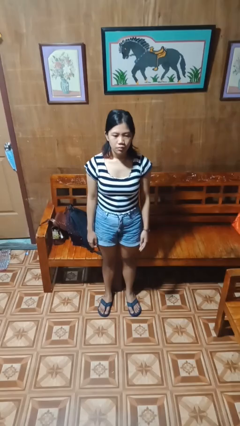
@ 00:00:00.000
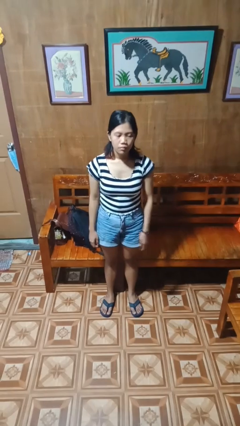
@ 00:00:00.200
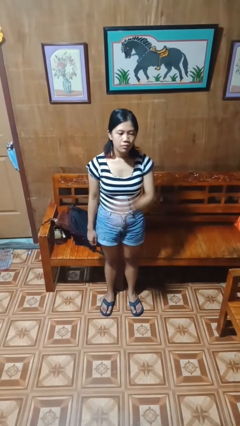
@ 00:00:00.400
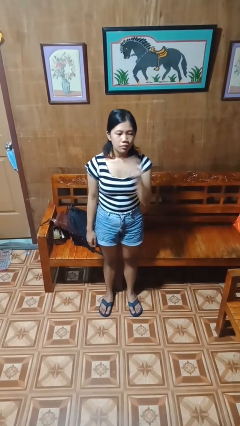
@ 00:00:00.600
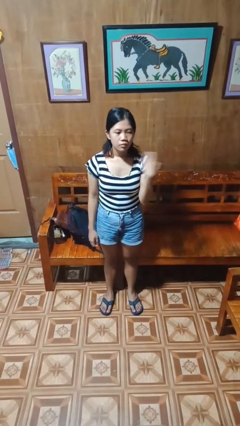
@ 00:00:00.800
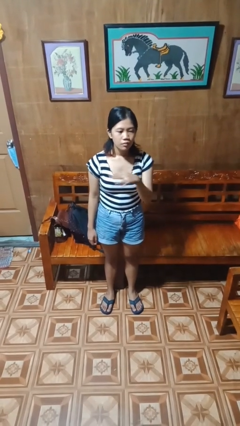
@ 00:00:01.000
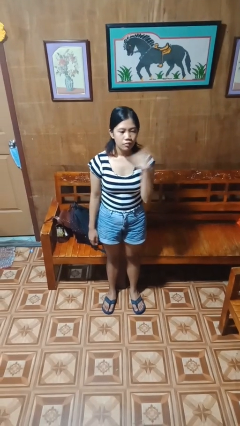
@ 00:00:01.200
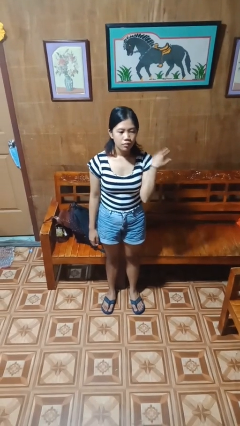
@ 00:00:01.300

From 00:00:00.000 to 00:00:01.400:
person gestures cut

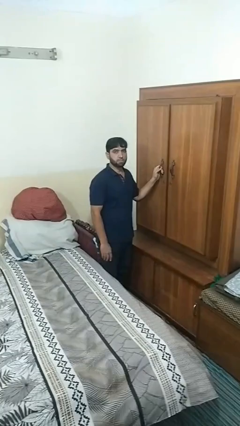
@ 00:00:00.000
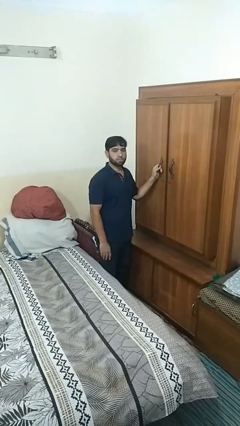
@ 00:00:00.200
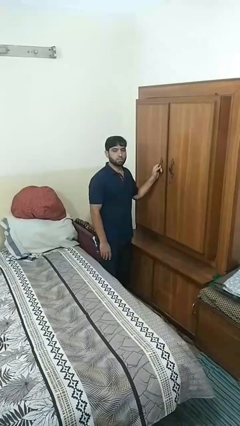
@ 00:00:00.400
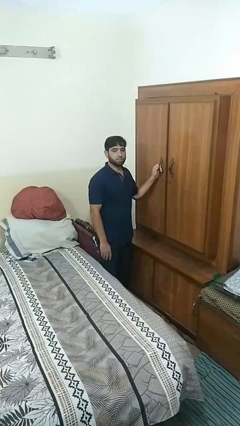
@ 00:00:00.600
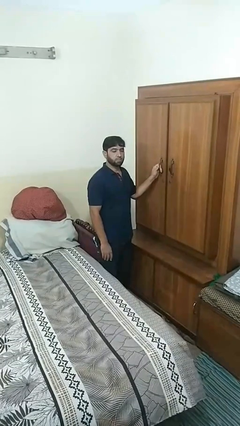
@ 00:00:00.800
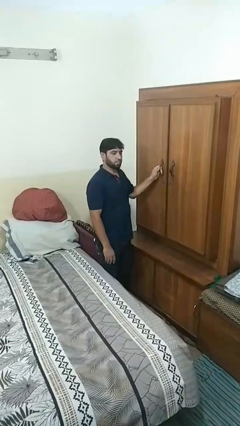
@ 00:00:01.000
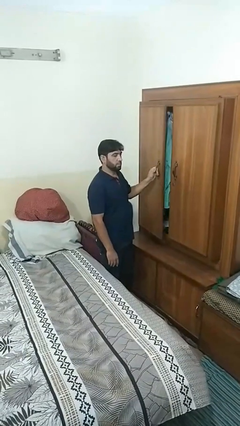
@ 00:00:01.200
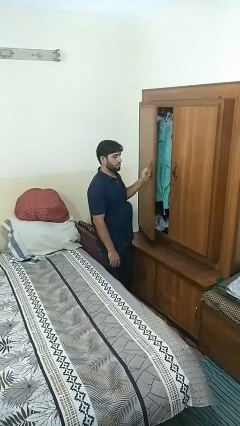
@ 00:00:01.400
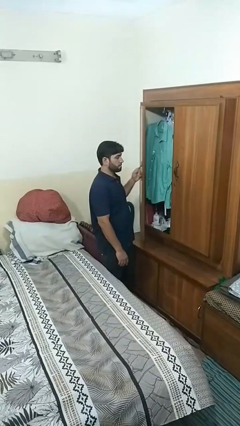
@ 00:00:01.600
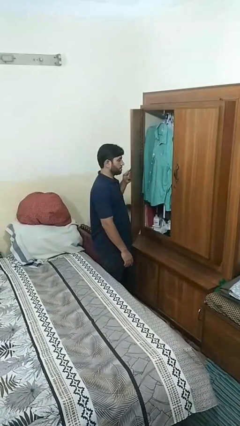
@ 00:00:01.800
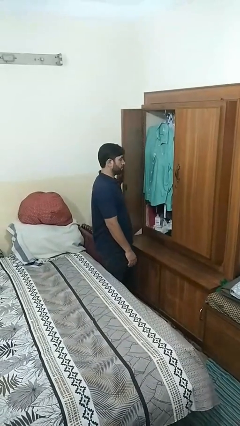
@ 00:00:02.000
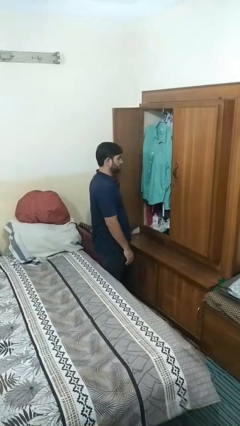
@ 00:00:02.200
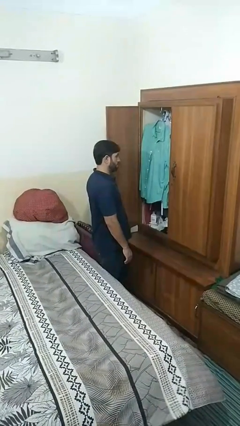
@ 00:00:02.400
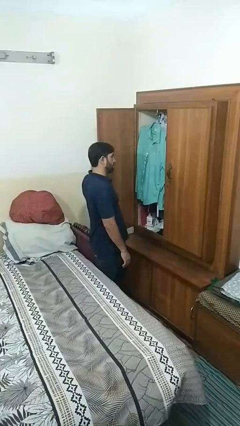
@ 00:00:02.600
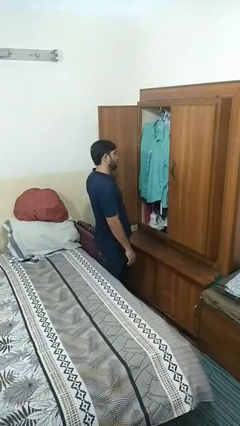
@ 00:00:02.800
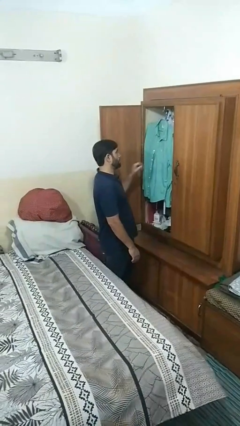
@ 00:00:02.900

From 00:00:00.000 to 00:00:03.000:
person opens closet door

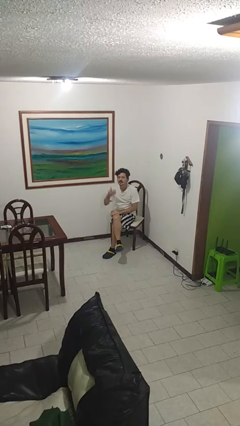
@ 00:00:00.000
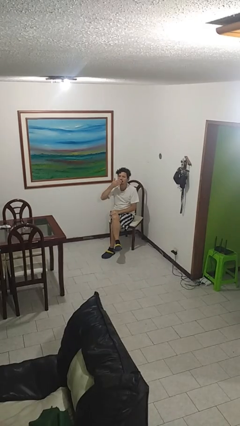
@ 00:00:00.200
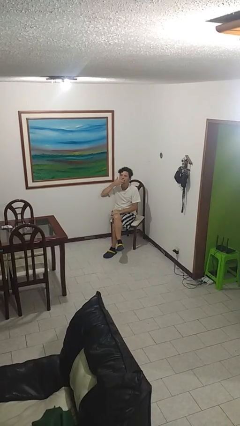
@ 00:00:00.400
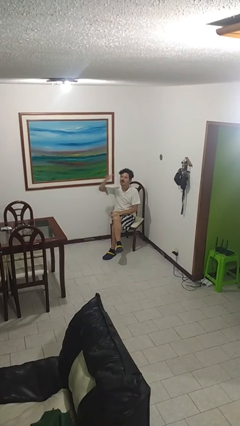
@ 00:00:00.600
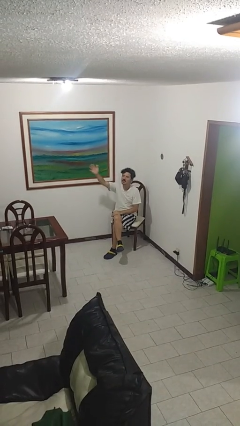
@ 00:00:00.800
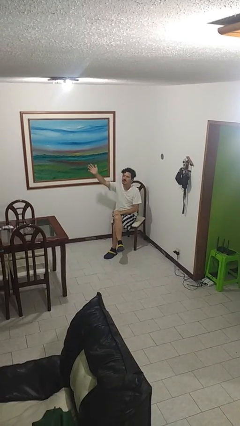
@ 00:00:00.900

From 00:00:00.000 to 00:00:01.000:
person gestures blow kiss

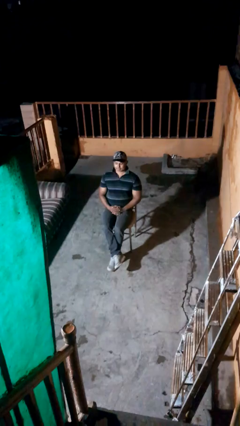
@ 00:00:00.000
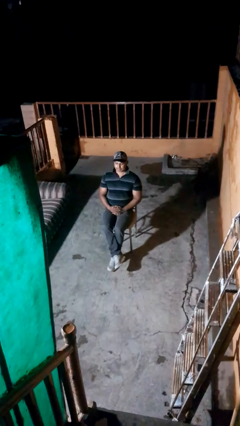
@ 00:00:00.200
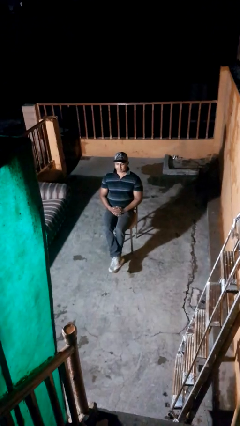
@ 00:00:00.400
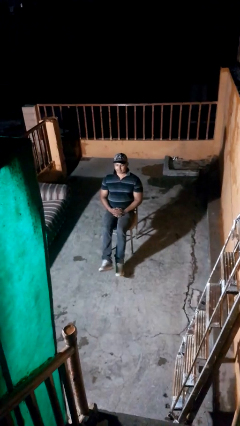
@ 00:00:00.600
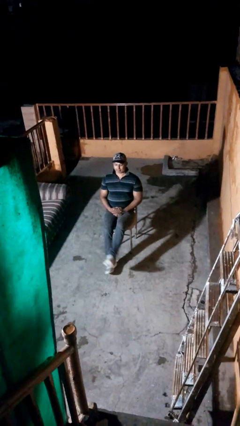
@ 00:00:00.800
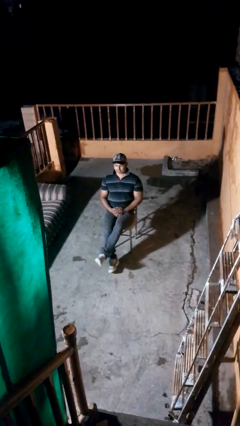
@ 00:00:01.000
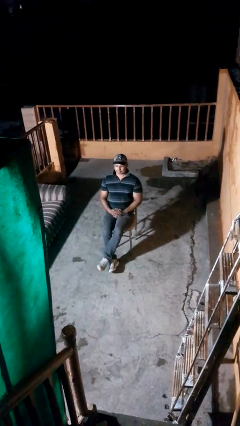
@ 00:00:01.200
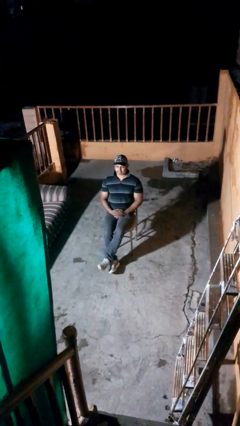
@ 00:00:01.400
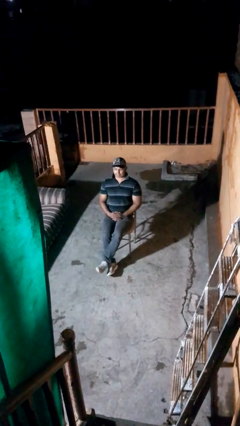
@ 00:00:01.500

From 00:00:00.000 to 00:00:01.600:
person crosses legs

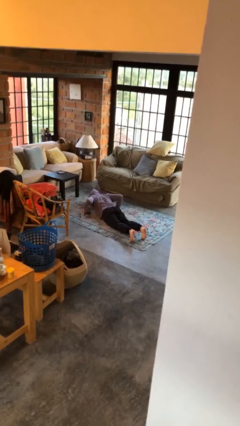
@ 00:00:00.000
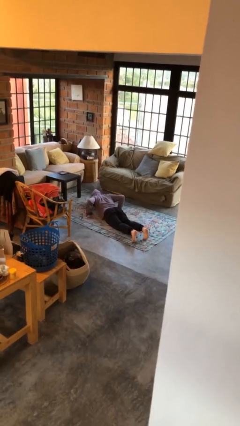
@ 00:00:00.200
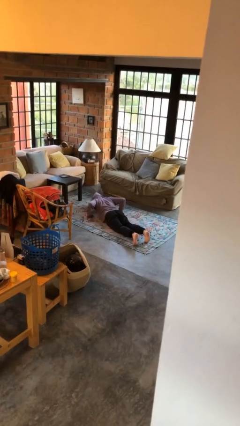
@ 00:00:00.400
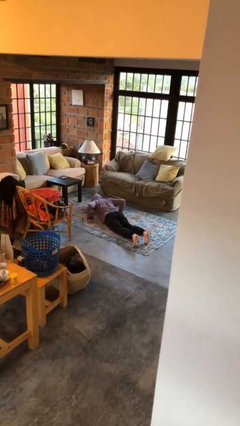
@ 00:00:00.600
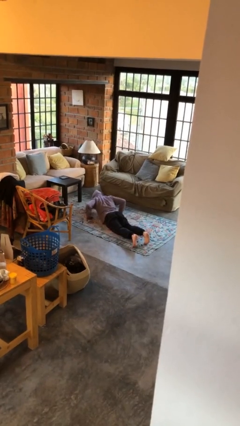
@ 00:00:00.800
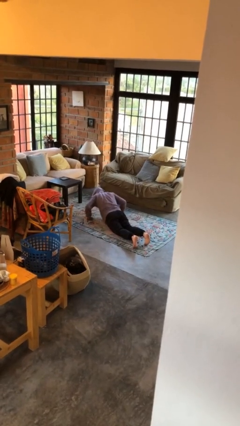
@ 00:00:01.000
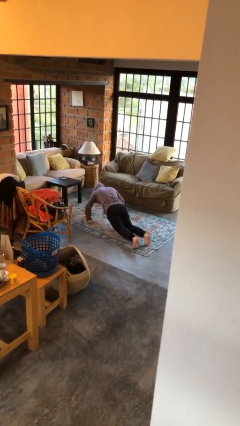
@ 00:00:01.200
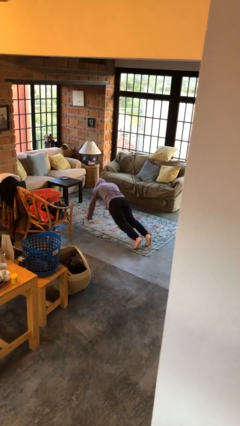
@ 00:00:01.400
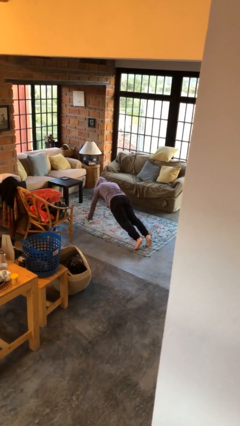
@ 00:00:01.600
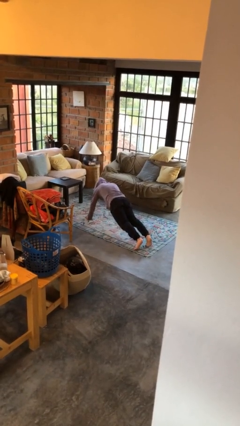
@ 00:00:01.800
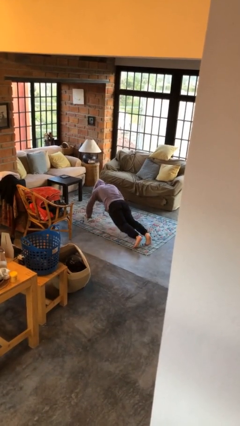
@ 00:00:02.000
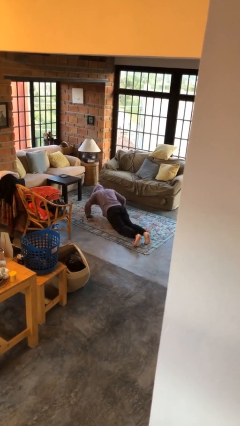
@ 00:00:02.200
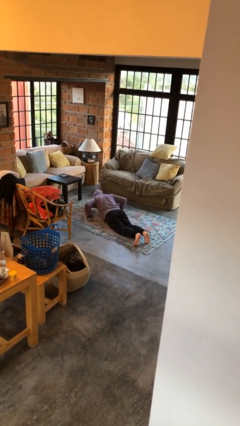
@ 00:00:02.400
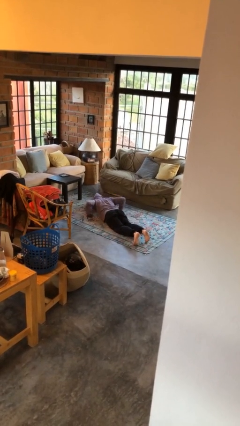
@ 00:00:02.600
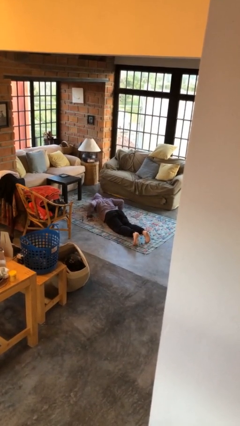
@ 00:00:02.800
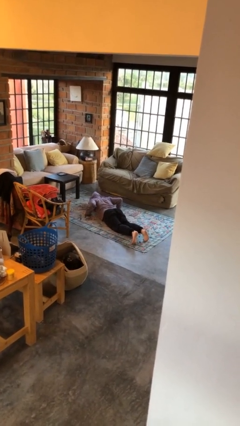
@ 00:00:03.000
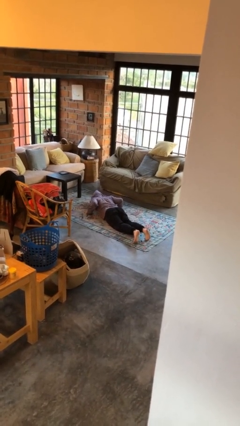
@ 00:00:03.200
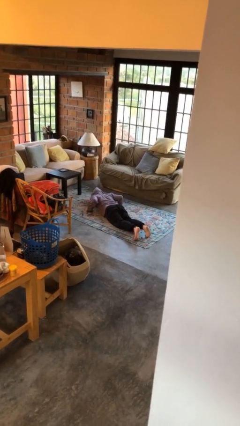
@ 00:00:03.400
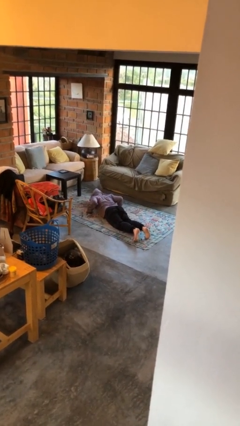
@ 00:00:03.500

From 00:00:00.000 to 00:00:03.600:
person exercises with pushup

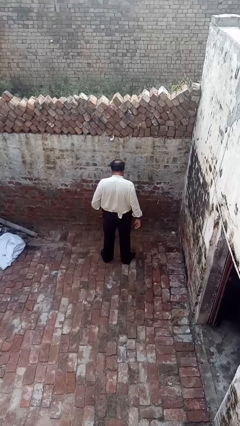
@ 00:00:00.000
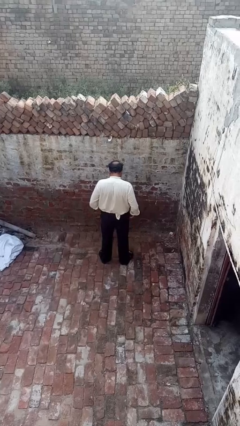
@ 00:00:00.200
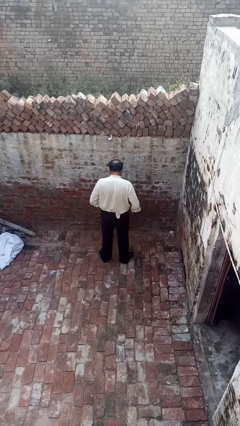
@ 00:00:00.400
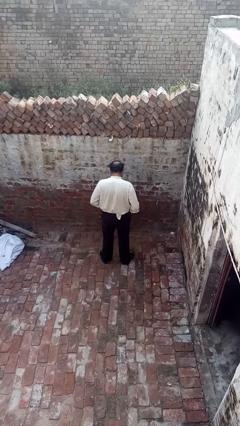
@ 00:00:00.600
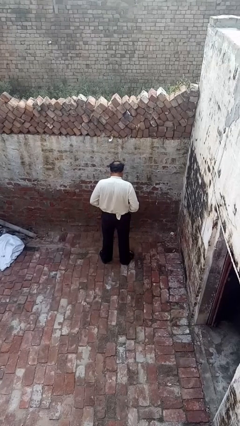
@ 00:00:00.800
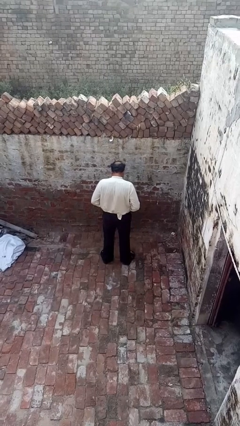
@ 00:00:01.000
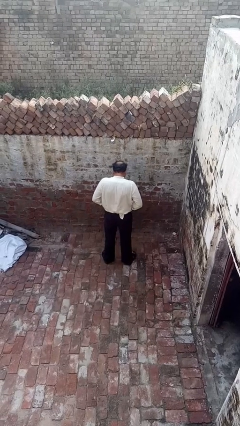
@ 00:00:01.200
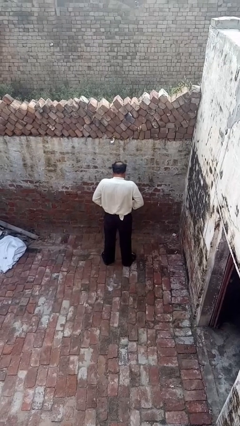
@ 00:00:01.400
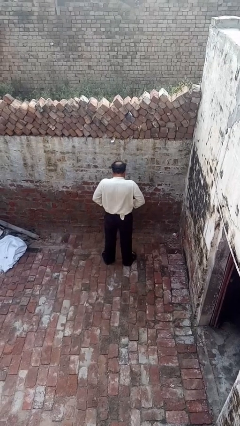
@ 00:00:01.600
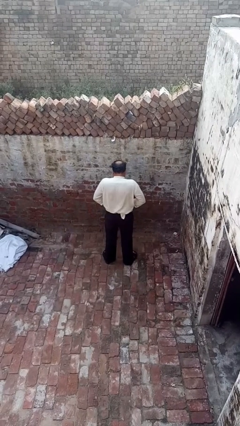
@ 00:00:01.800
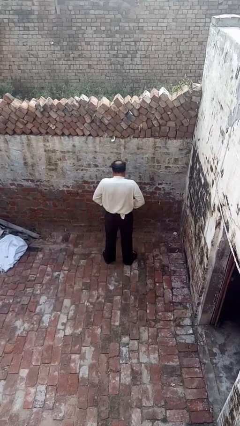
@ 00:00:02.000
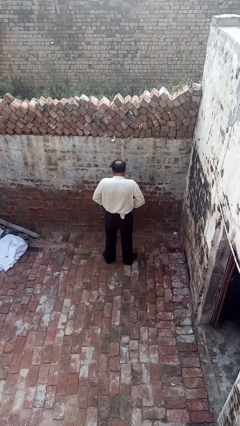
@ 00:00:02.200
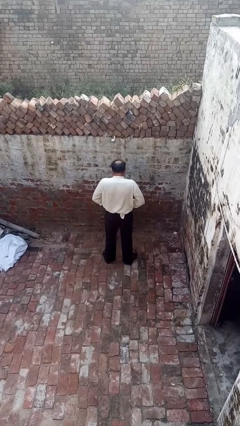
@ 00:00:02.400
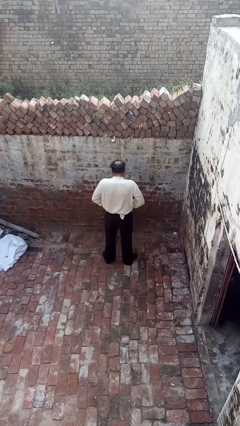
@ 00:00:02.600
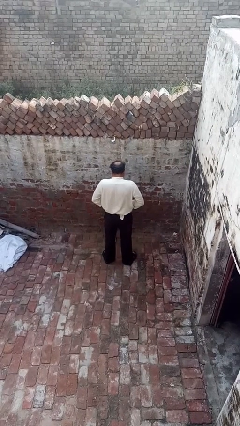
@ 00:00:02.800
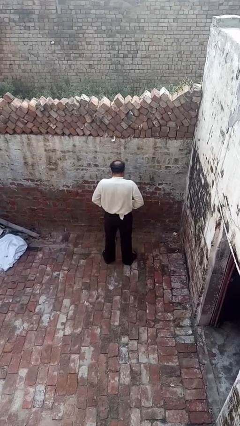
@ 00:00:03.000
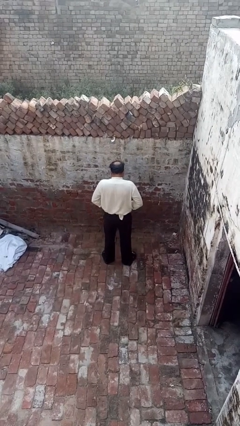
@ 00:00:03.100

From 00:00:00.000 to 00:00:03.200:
person hikes up pants

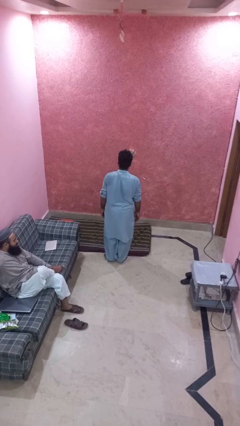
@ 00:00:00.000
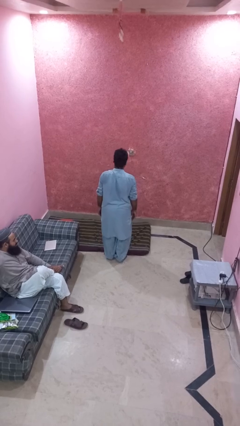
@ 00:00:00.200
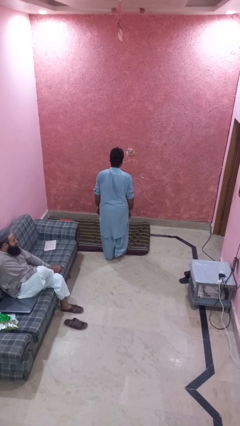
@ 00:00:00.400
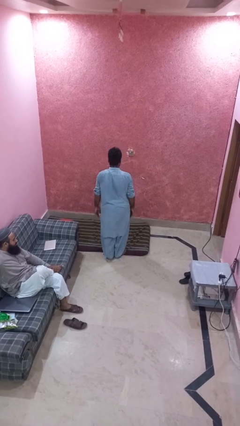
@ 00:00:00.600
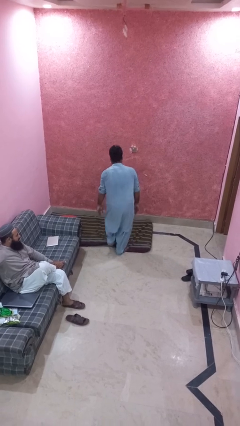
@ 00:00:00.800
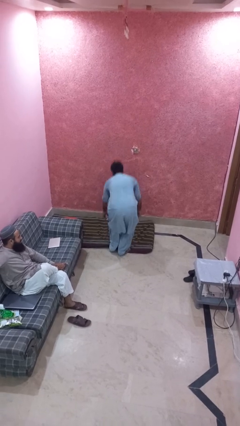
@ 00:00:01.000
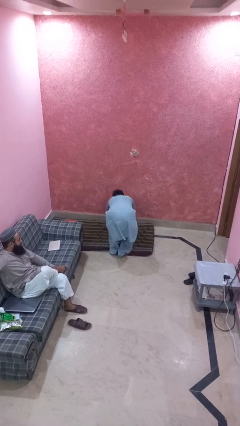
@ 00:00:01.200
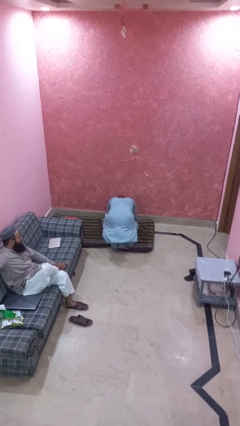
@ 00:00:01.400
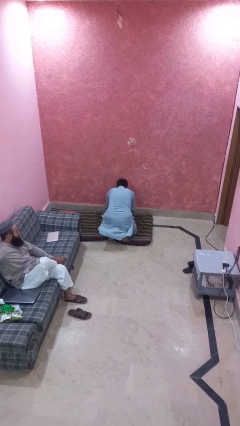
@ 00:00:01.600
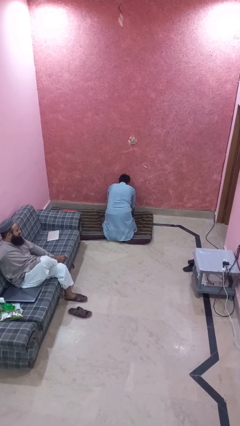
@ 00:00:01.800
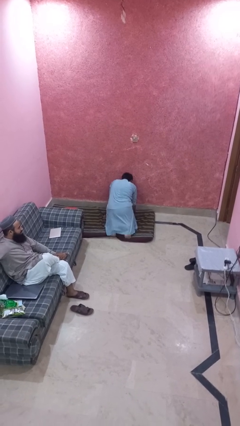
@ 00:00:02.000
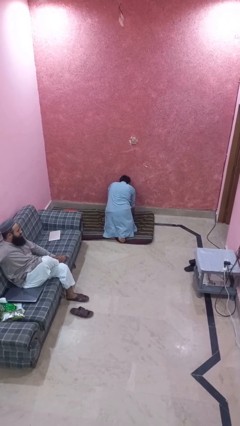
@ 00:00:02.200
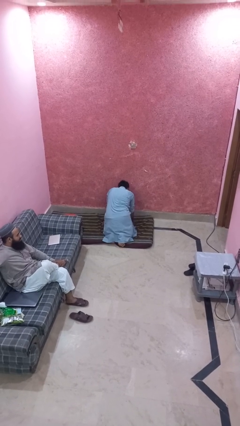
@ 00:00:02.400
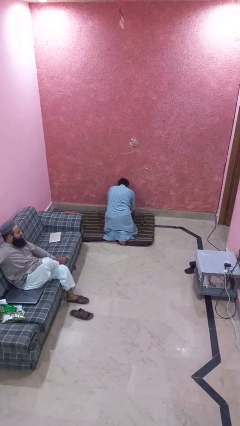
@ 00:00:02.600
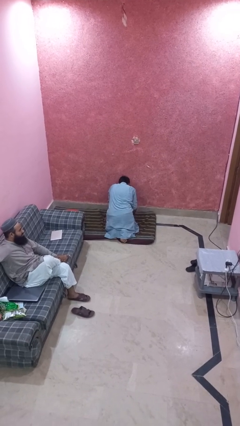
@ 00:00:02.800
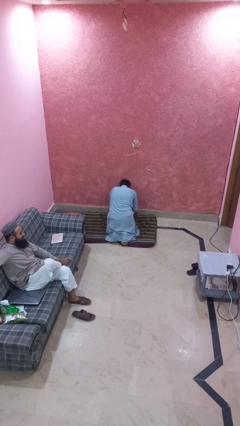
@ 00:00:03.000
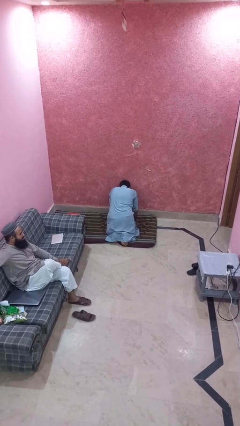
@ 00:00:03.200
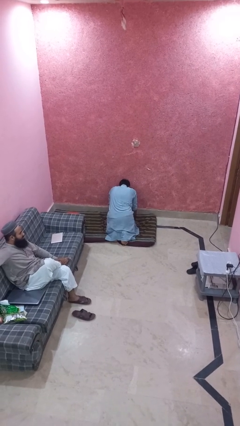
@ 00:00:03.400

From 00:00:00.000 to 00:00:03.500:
person trips on object on floor
